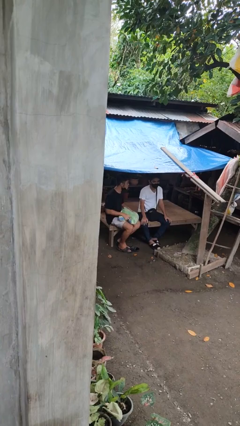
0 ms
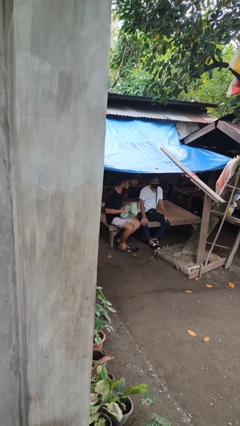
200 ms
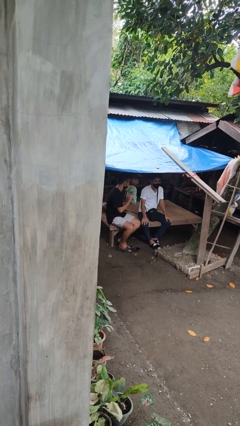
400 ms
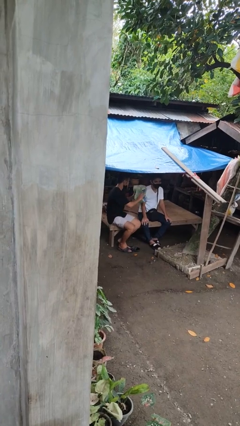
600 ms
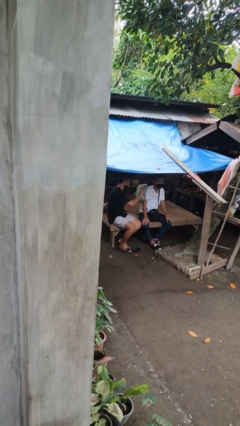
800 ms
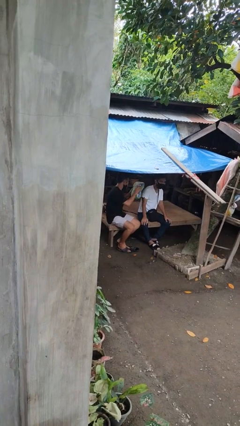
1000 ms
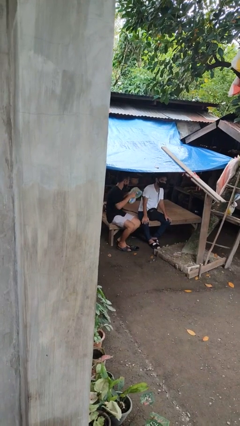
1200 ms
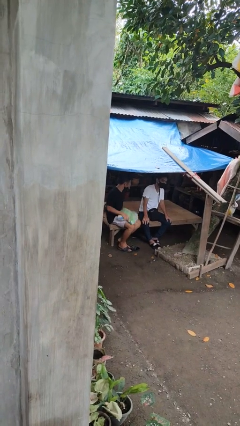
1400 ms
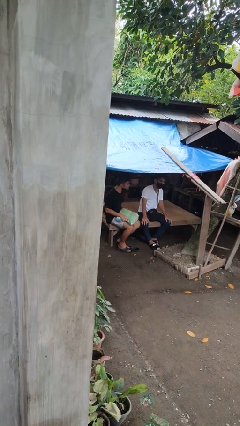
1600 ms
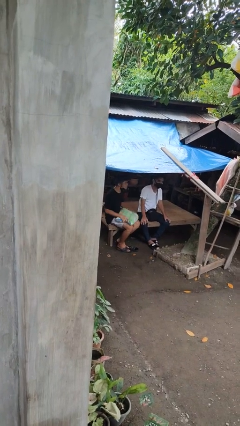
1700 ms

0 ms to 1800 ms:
person hits person with pillow

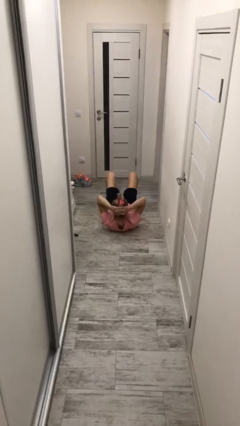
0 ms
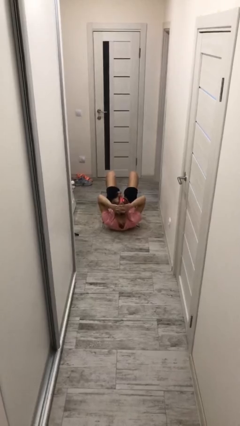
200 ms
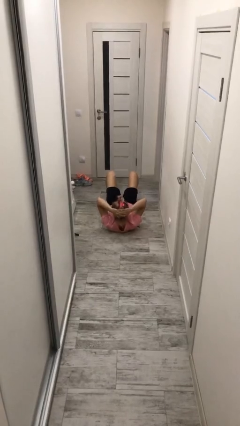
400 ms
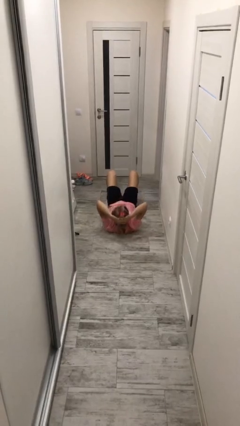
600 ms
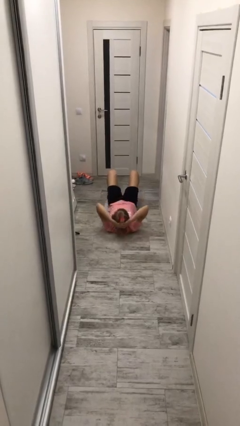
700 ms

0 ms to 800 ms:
person exercises with situp

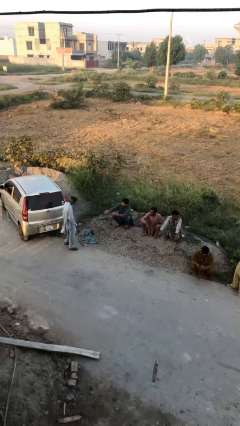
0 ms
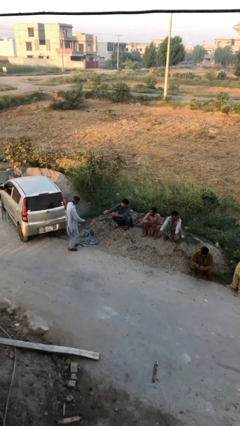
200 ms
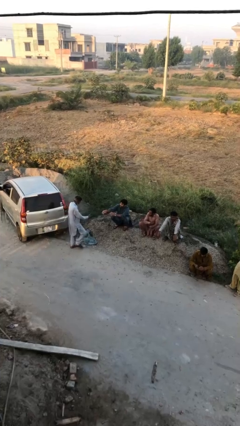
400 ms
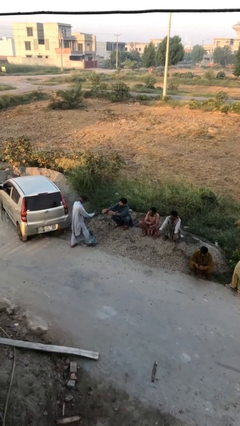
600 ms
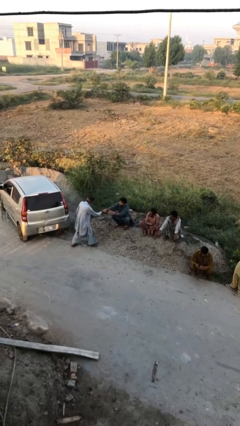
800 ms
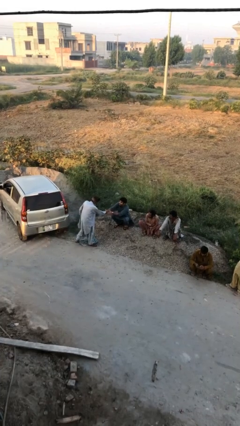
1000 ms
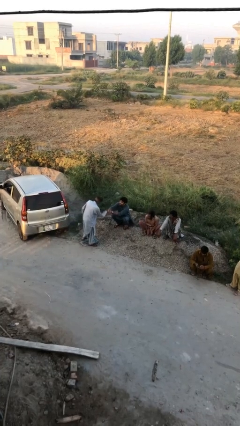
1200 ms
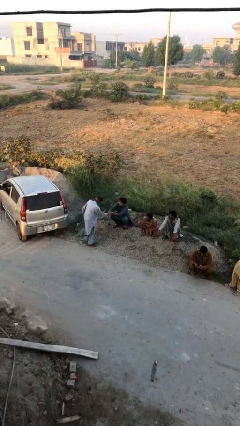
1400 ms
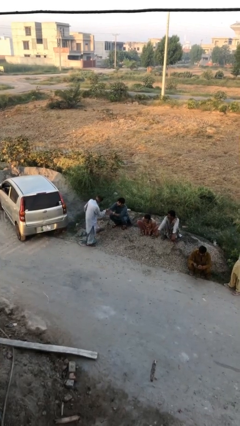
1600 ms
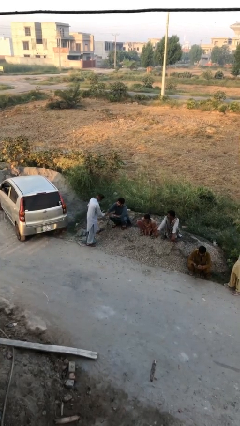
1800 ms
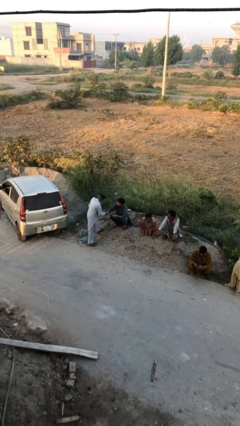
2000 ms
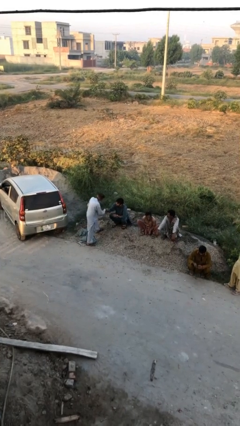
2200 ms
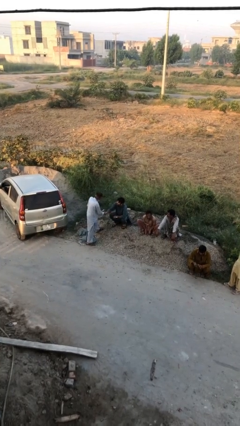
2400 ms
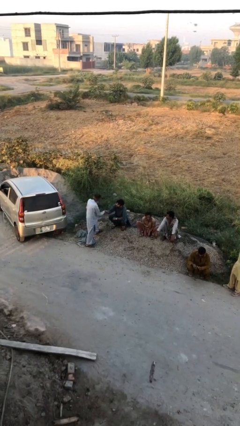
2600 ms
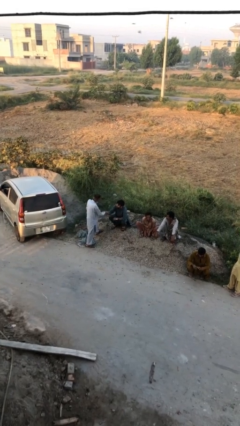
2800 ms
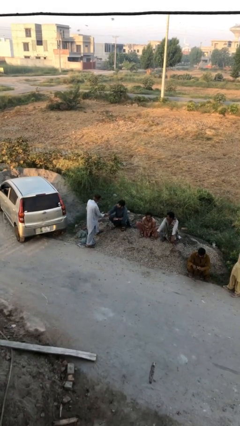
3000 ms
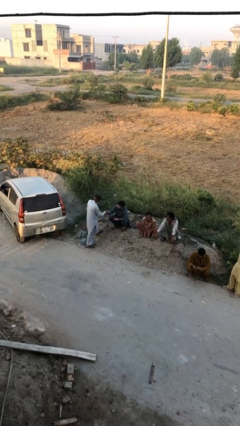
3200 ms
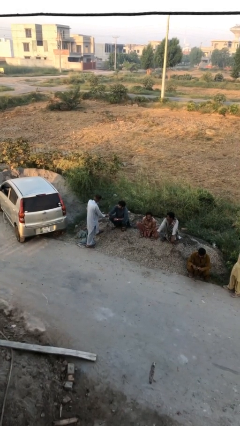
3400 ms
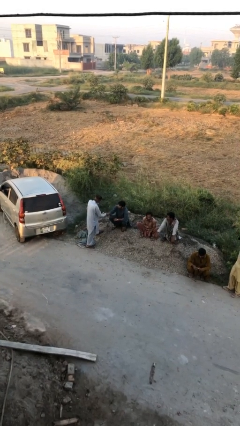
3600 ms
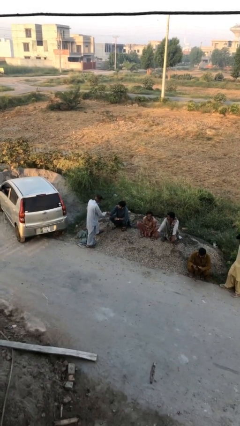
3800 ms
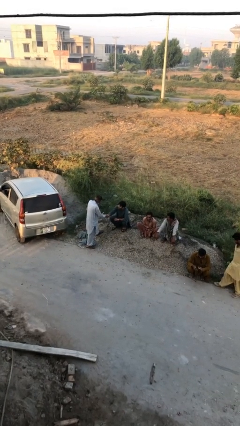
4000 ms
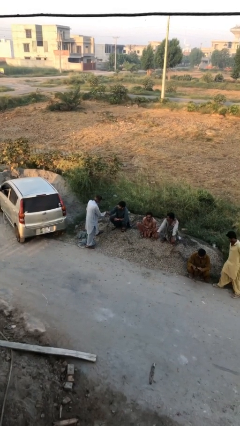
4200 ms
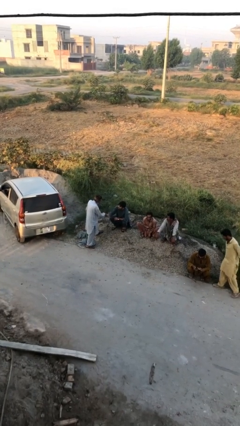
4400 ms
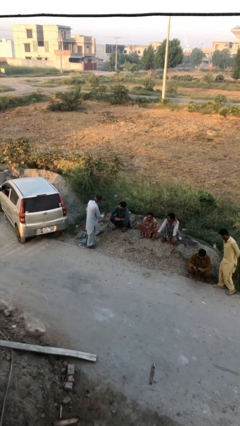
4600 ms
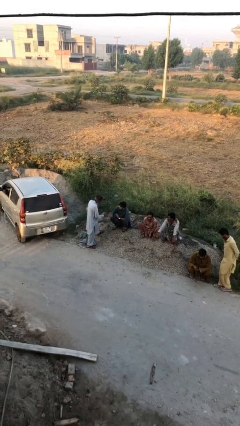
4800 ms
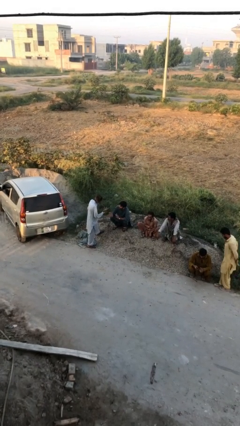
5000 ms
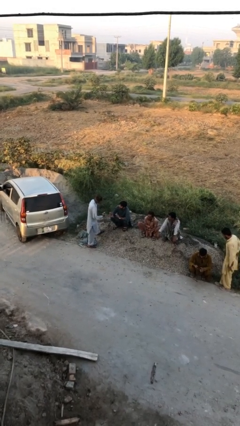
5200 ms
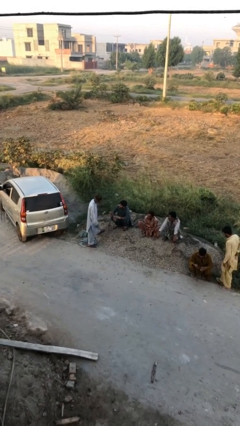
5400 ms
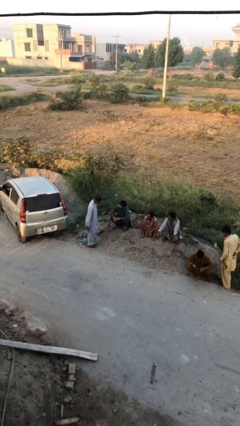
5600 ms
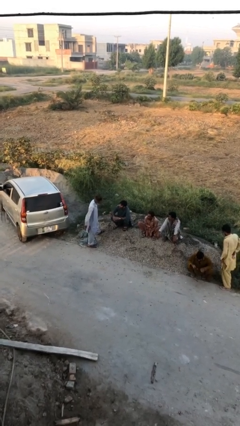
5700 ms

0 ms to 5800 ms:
person shakes hand

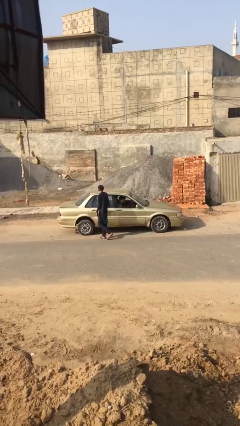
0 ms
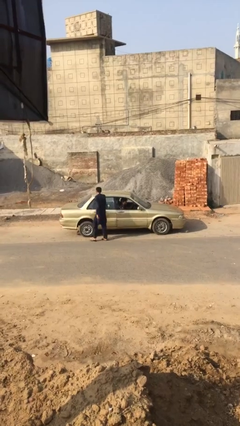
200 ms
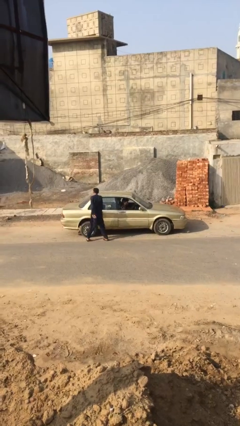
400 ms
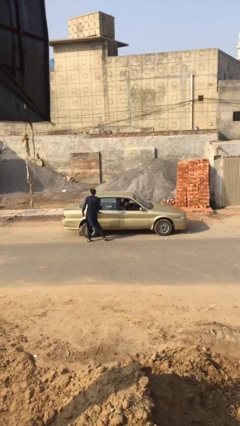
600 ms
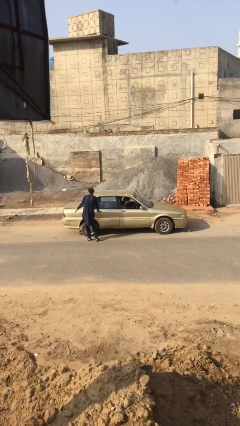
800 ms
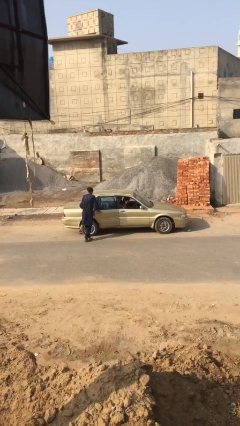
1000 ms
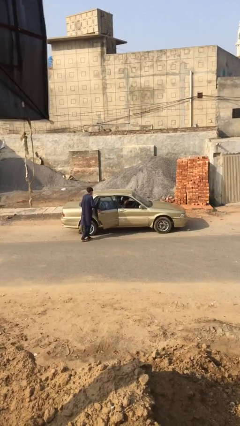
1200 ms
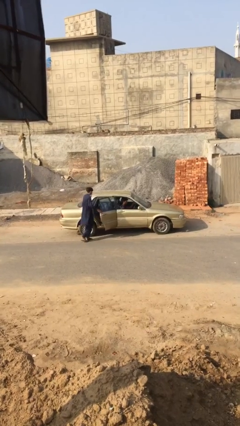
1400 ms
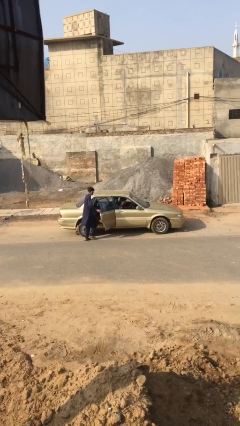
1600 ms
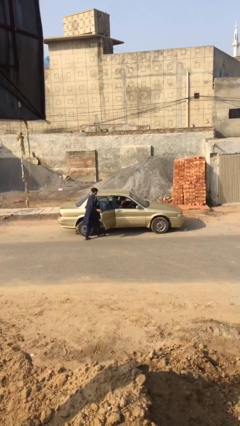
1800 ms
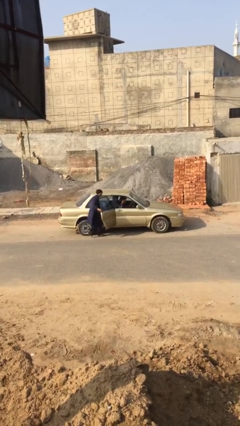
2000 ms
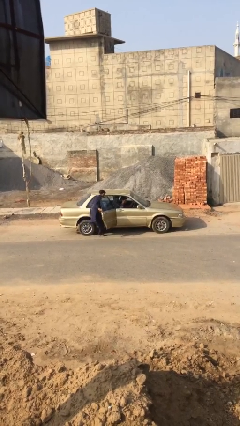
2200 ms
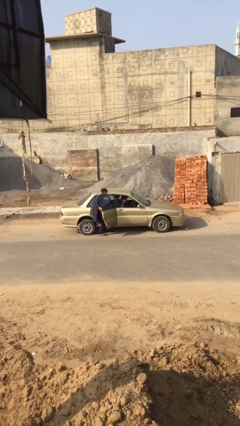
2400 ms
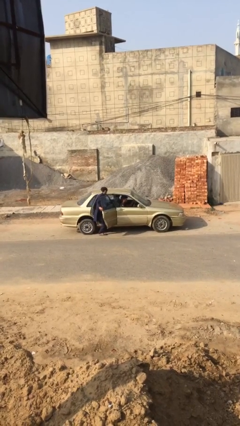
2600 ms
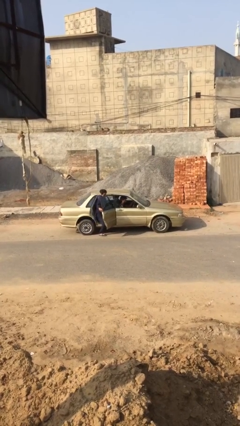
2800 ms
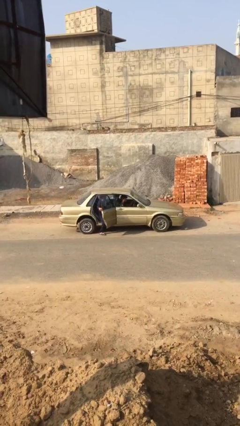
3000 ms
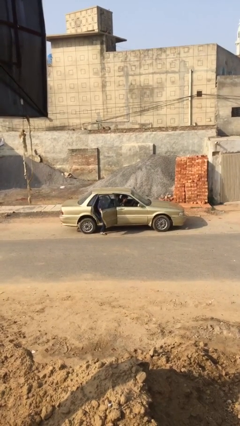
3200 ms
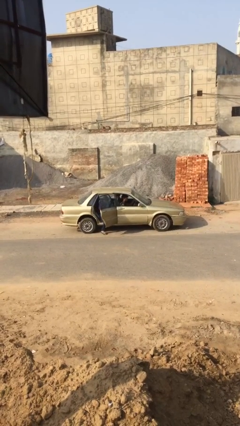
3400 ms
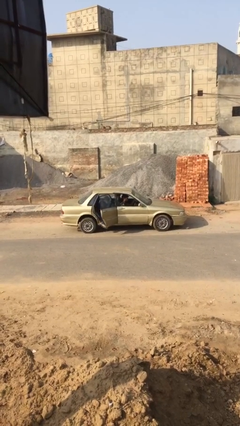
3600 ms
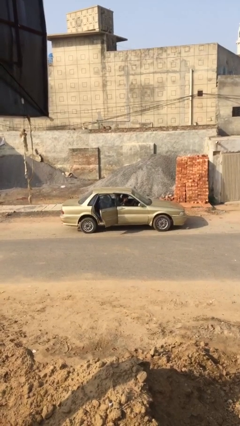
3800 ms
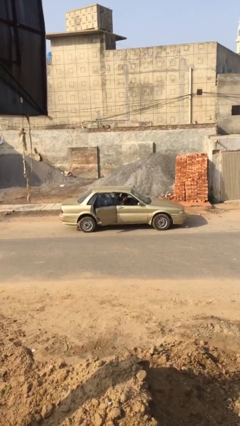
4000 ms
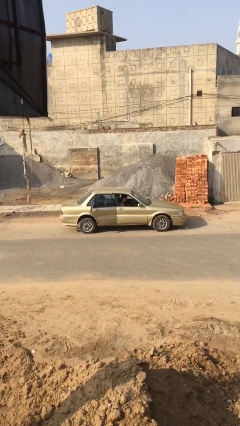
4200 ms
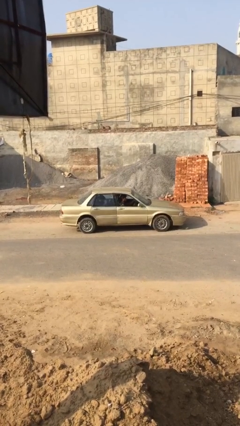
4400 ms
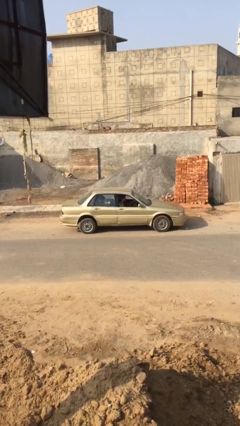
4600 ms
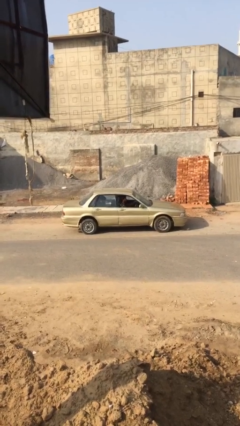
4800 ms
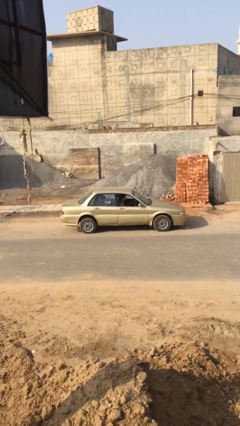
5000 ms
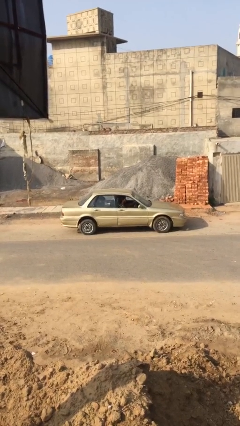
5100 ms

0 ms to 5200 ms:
car picks up person

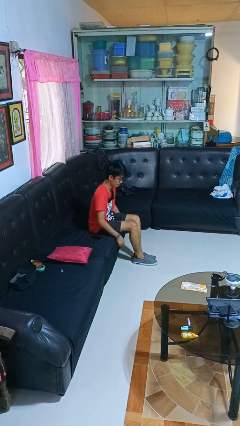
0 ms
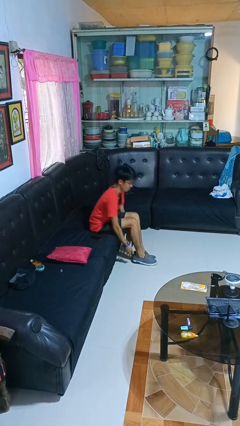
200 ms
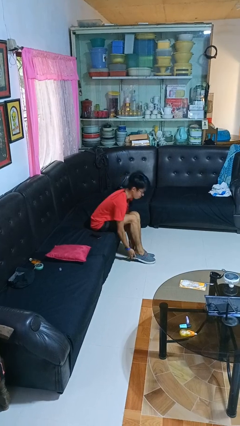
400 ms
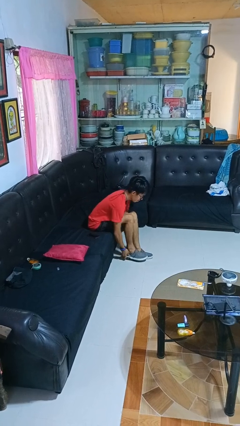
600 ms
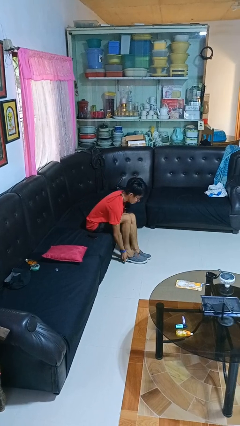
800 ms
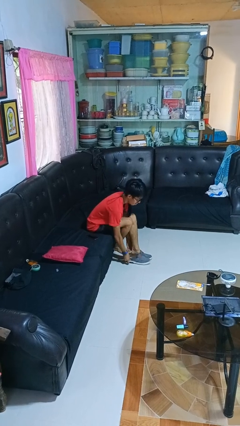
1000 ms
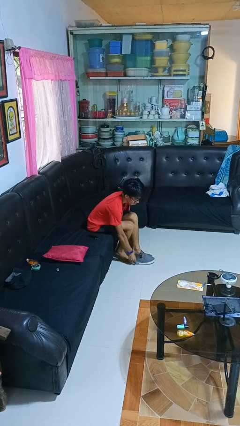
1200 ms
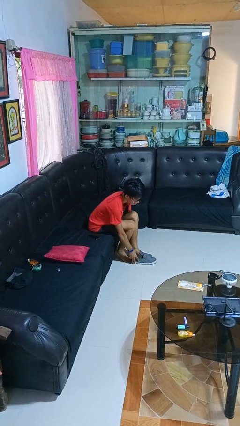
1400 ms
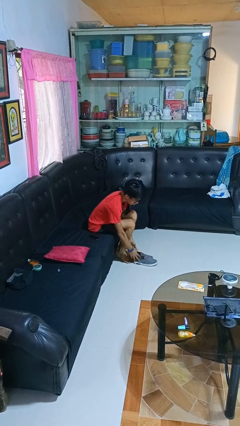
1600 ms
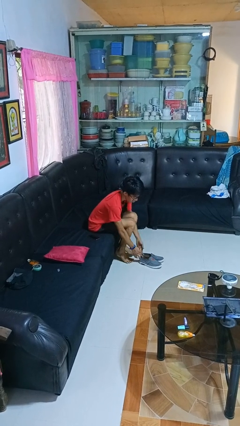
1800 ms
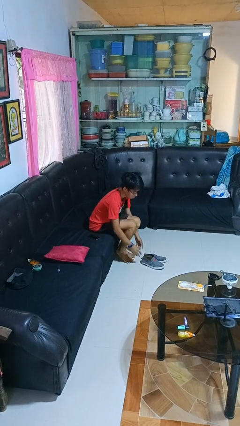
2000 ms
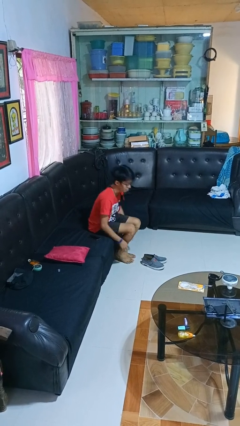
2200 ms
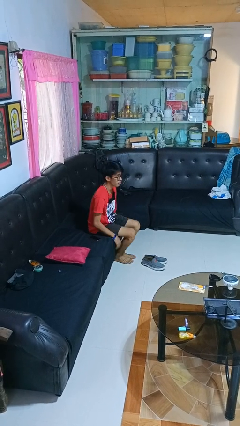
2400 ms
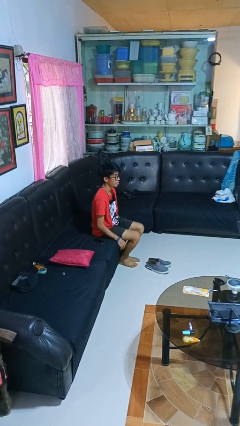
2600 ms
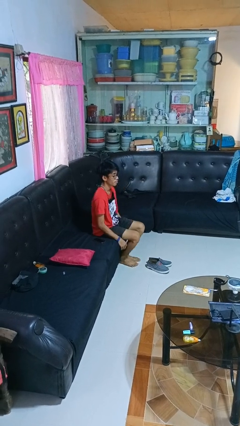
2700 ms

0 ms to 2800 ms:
person takes off shoes

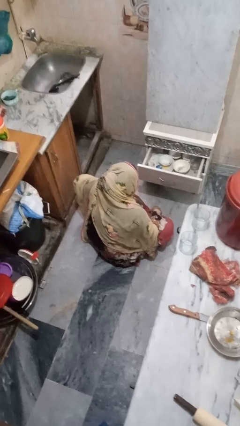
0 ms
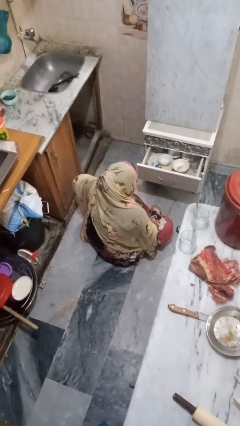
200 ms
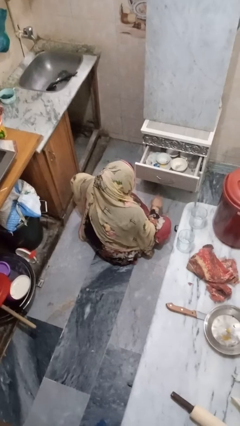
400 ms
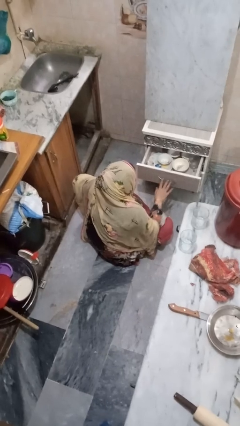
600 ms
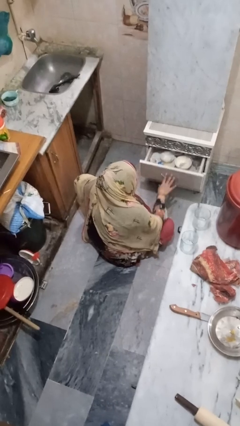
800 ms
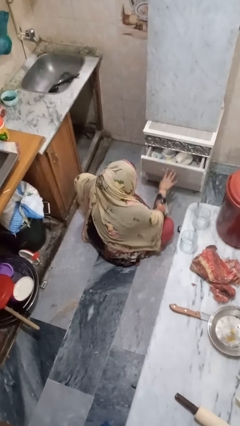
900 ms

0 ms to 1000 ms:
person closes kitchen drawer

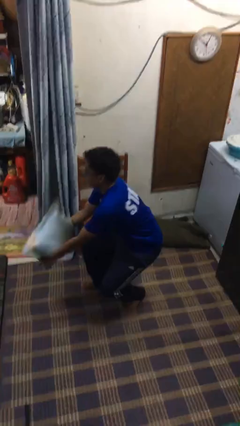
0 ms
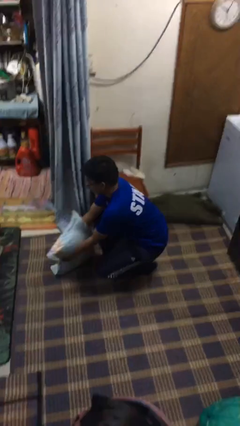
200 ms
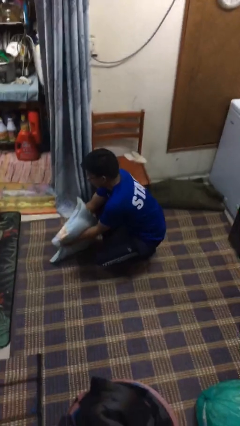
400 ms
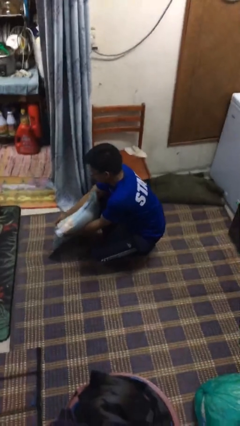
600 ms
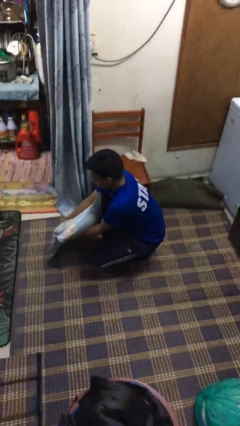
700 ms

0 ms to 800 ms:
person catches dropped object
